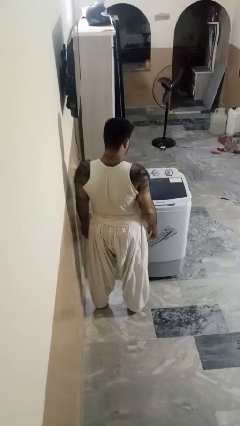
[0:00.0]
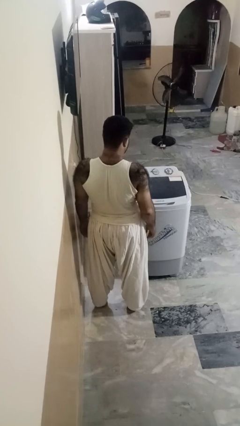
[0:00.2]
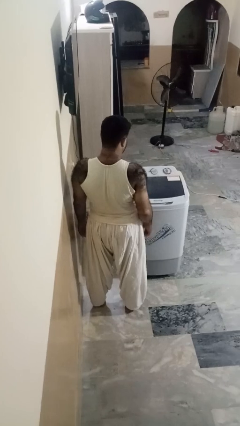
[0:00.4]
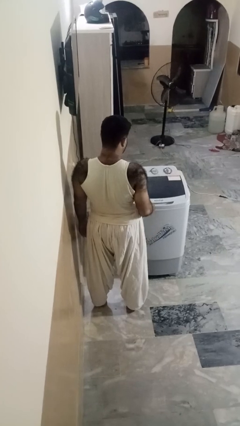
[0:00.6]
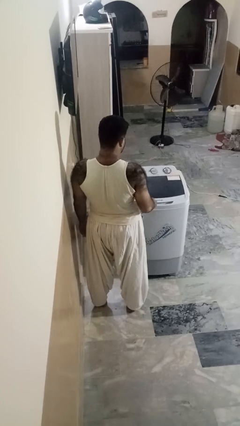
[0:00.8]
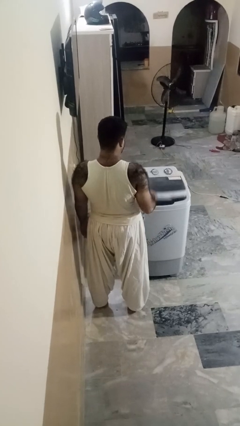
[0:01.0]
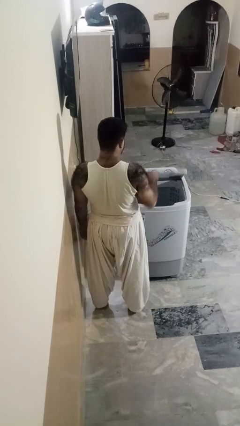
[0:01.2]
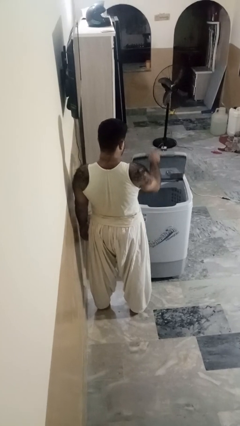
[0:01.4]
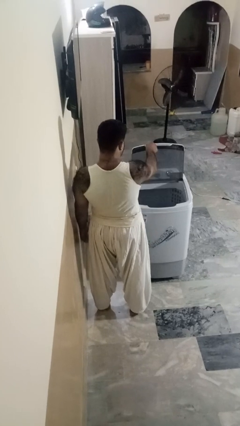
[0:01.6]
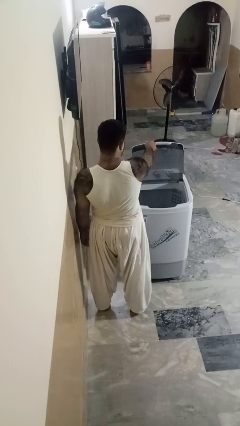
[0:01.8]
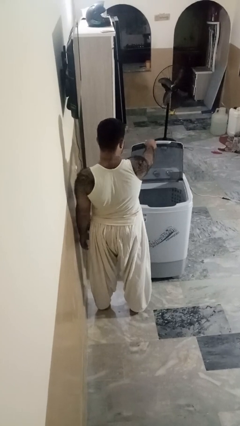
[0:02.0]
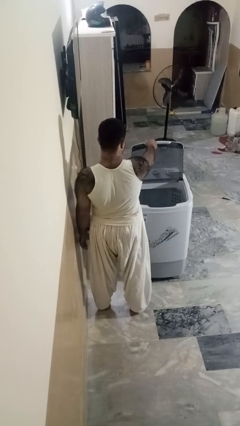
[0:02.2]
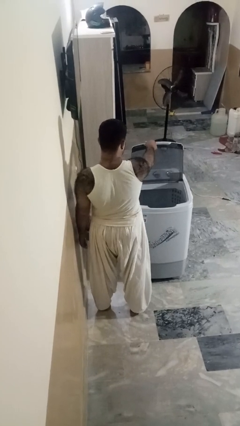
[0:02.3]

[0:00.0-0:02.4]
person opens clothes washer

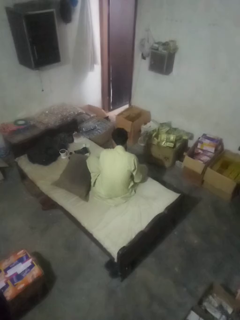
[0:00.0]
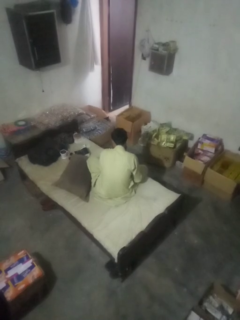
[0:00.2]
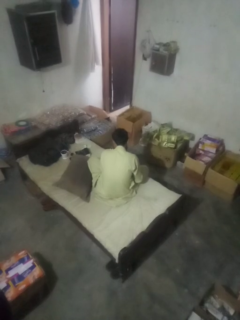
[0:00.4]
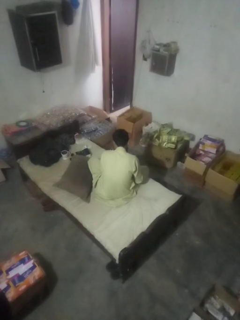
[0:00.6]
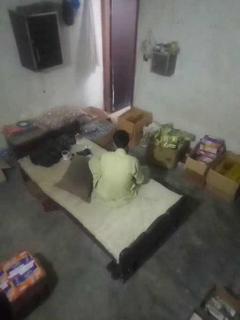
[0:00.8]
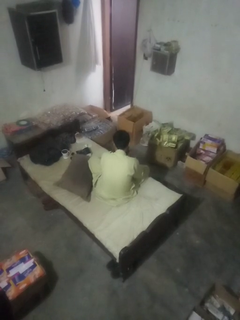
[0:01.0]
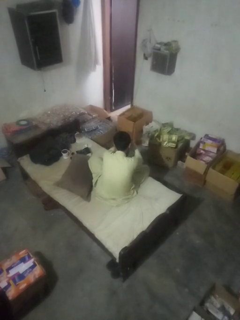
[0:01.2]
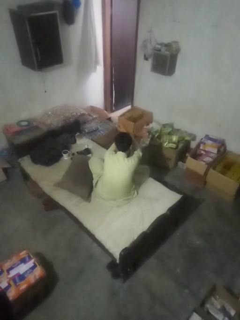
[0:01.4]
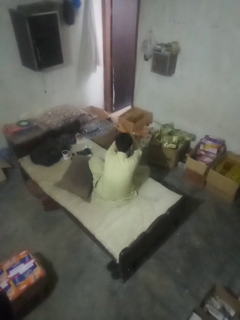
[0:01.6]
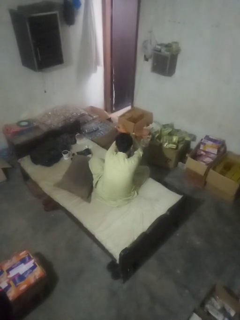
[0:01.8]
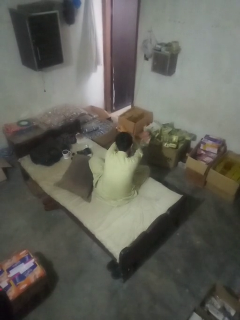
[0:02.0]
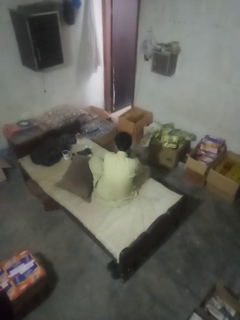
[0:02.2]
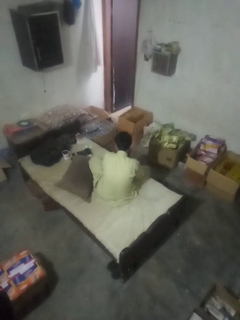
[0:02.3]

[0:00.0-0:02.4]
person gestures arms x

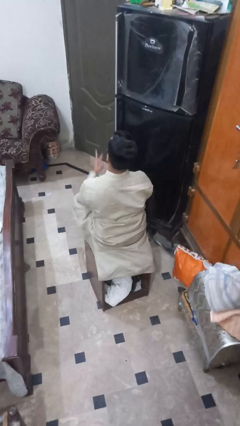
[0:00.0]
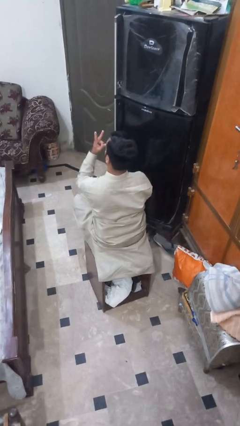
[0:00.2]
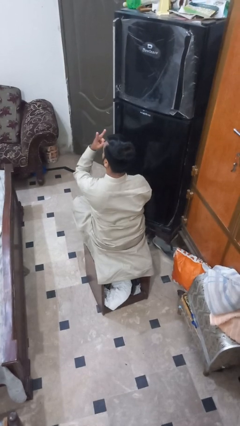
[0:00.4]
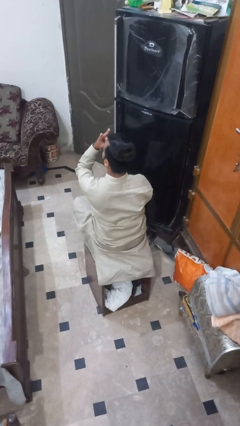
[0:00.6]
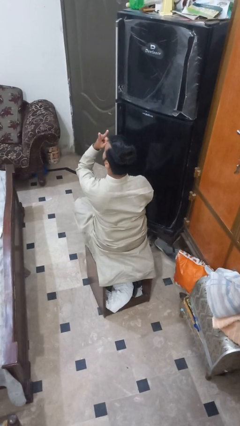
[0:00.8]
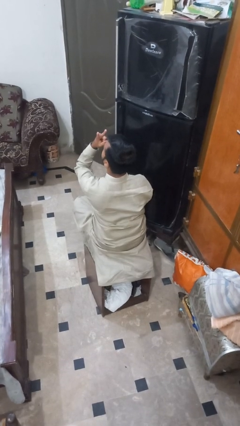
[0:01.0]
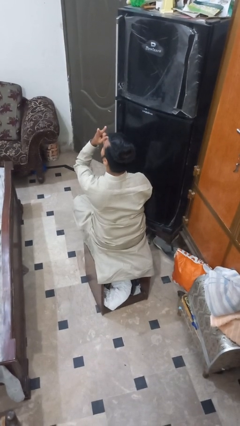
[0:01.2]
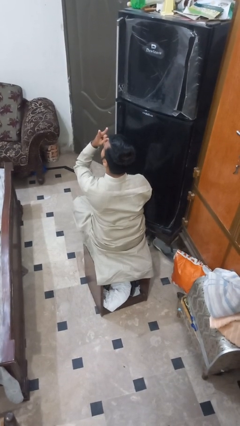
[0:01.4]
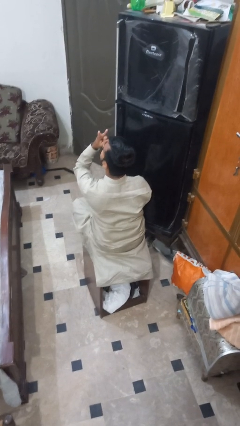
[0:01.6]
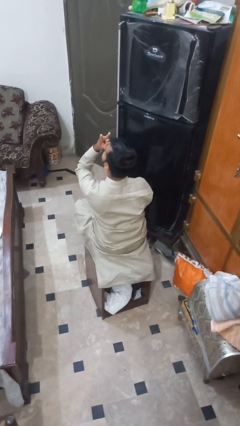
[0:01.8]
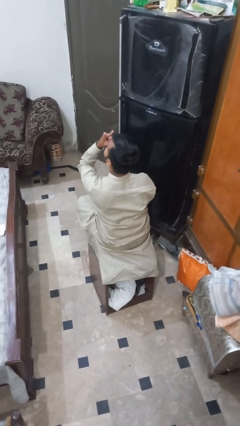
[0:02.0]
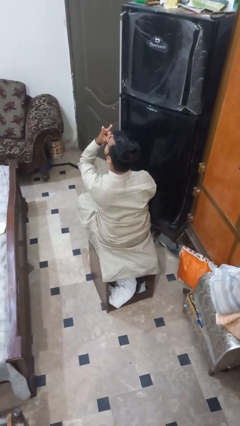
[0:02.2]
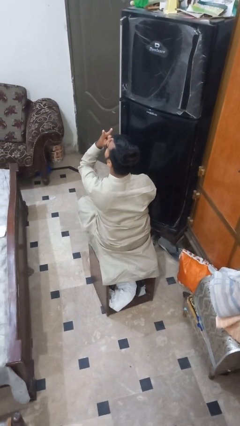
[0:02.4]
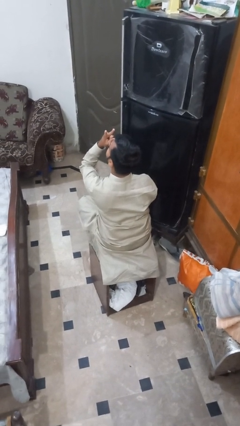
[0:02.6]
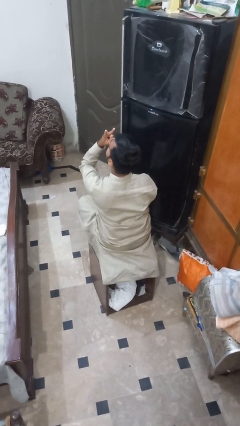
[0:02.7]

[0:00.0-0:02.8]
person gestures watch closely

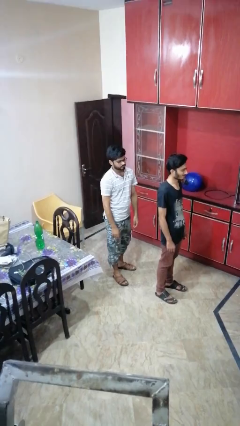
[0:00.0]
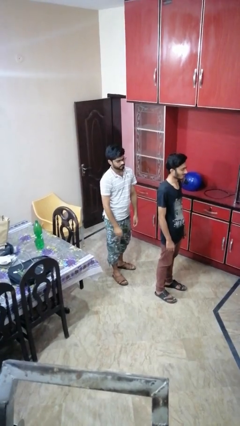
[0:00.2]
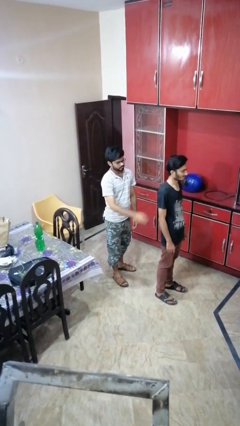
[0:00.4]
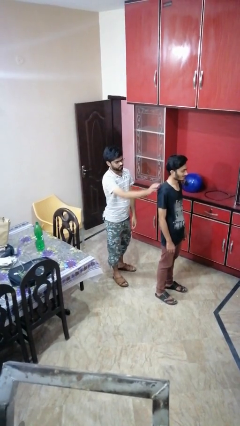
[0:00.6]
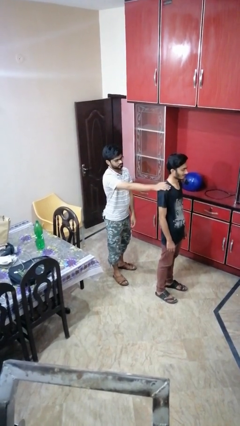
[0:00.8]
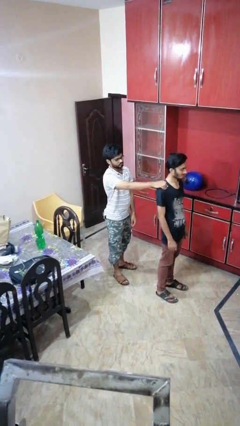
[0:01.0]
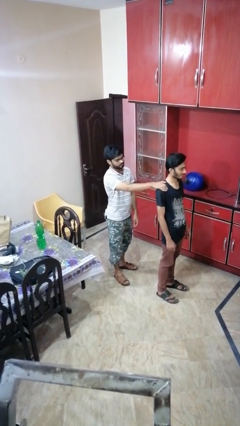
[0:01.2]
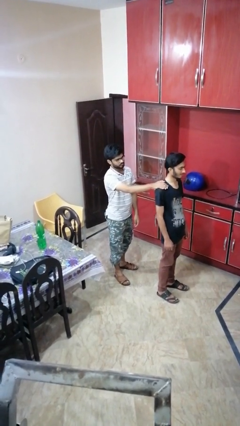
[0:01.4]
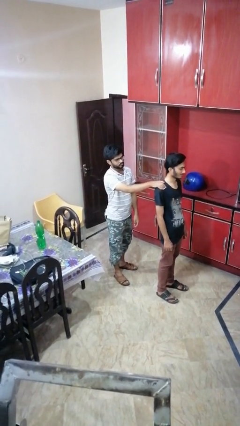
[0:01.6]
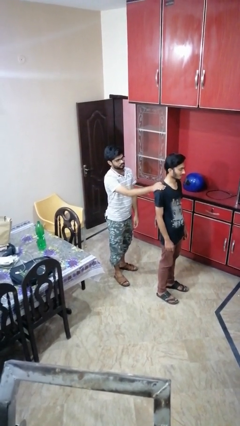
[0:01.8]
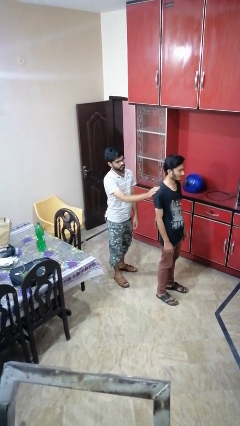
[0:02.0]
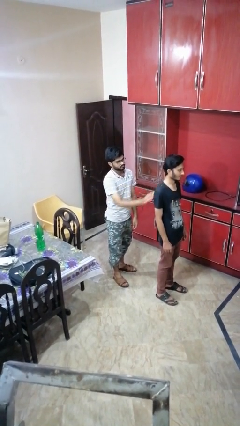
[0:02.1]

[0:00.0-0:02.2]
person touches back of person

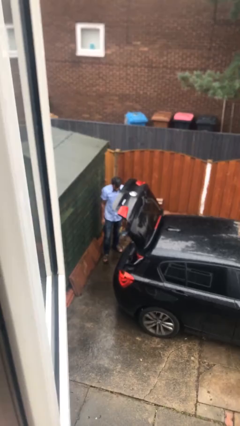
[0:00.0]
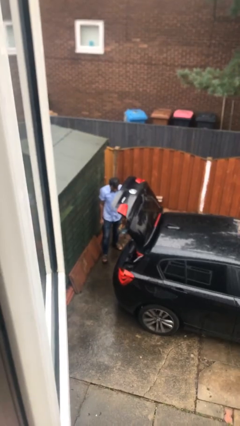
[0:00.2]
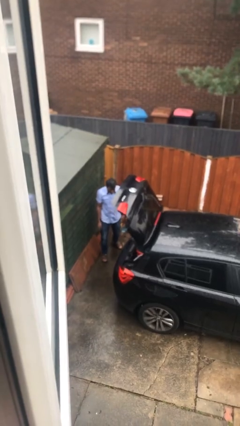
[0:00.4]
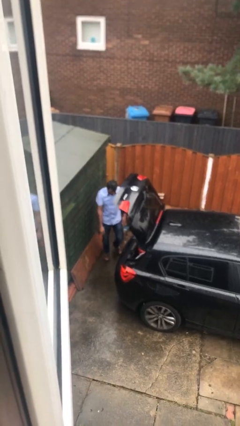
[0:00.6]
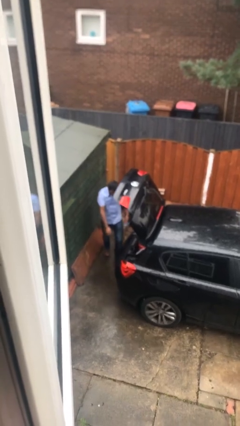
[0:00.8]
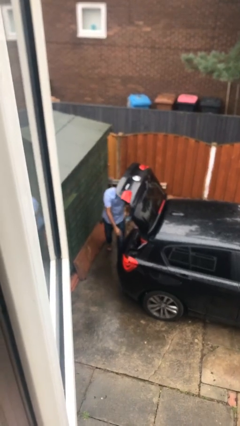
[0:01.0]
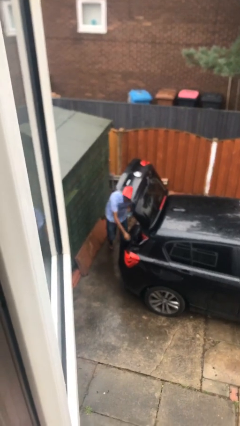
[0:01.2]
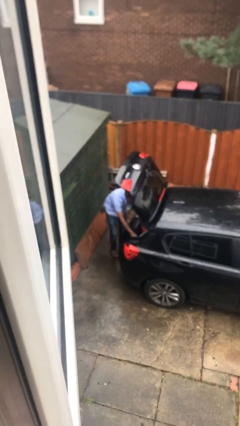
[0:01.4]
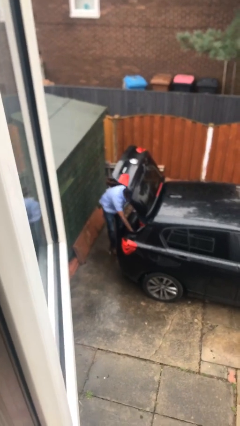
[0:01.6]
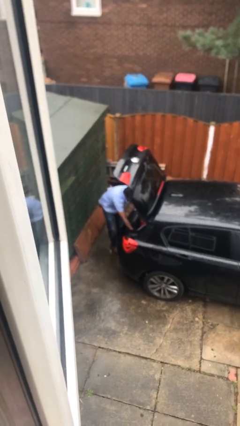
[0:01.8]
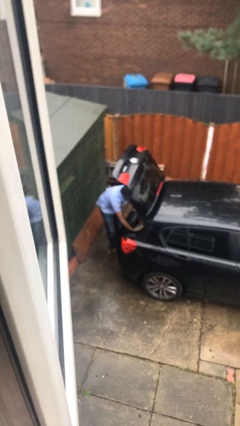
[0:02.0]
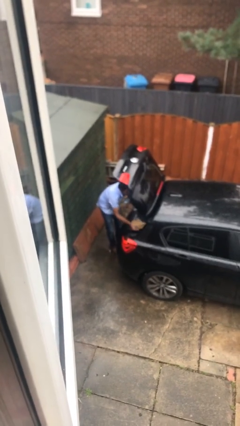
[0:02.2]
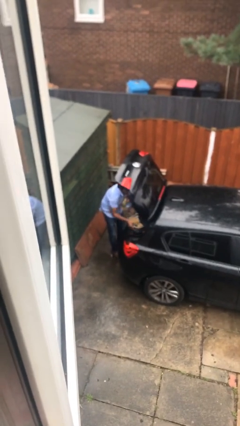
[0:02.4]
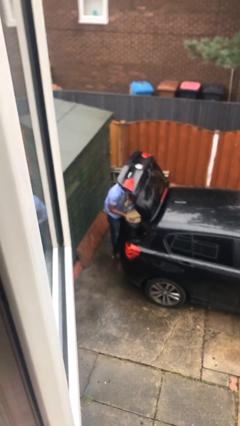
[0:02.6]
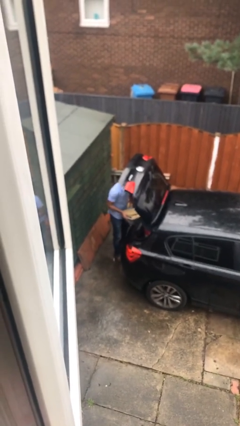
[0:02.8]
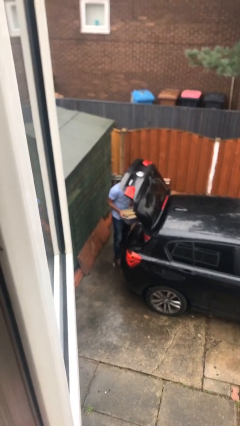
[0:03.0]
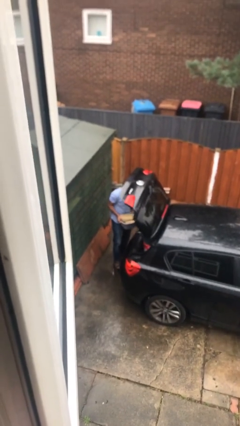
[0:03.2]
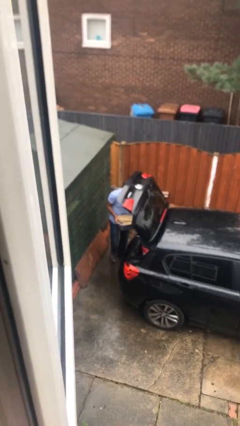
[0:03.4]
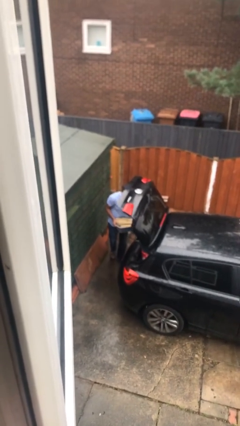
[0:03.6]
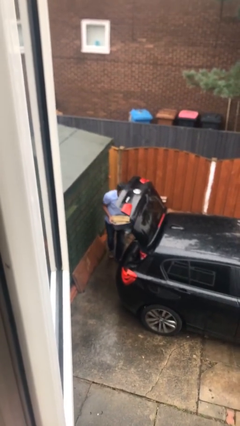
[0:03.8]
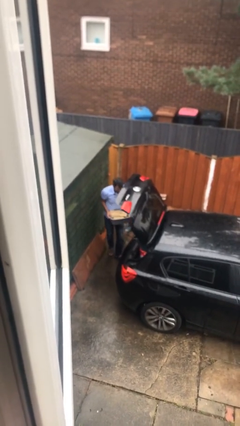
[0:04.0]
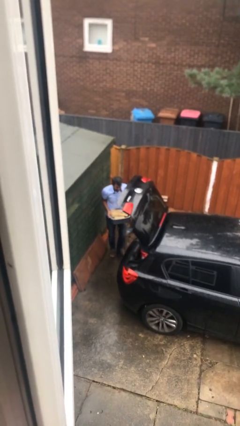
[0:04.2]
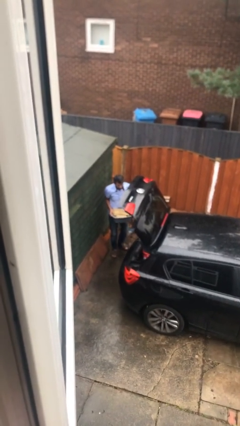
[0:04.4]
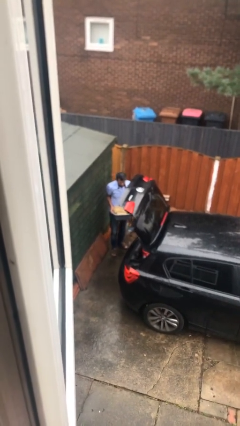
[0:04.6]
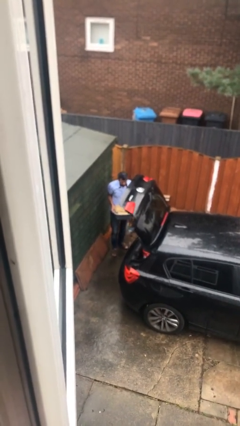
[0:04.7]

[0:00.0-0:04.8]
person unloads car

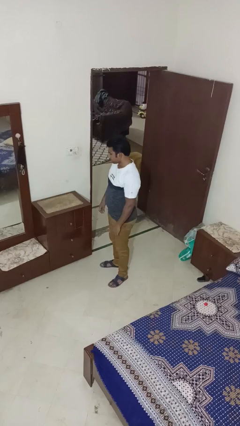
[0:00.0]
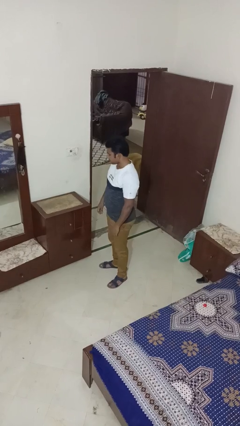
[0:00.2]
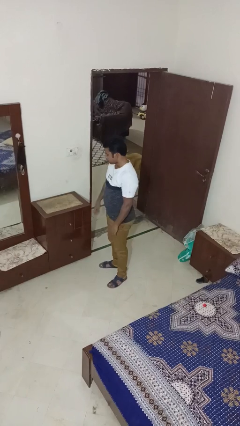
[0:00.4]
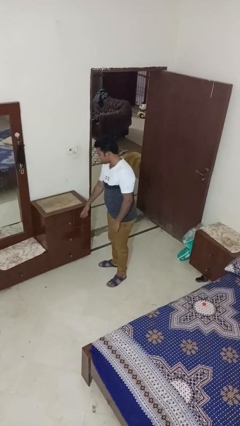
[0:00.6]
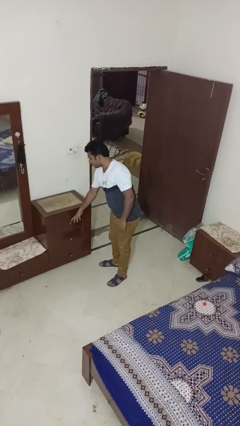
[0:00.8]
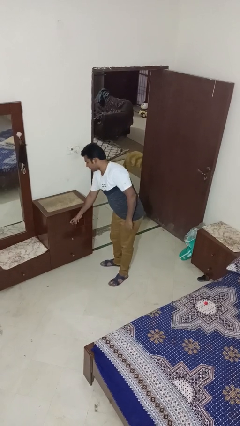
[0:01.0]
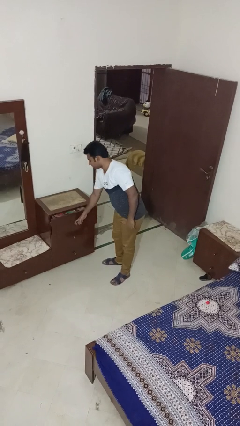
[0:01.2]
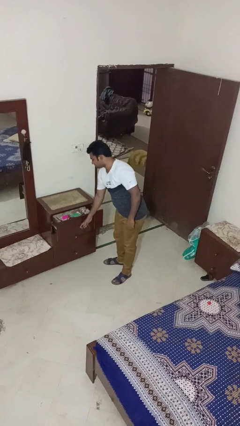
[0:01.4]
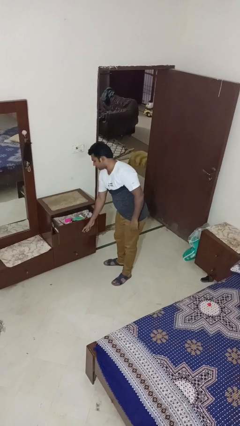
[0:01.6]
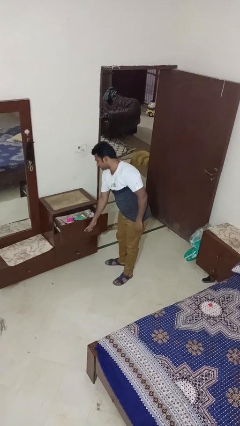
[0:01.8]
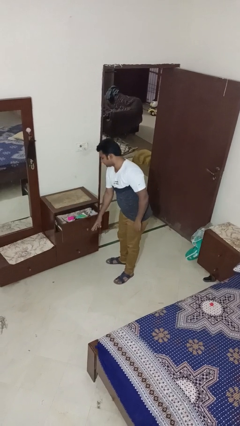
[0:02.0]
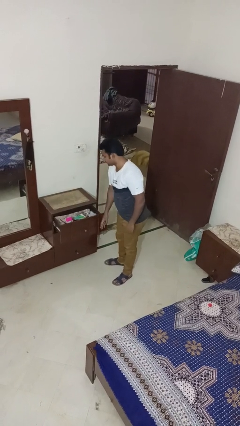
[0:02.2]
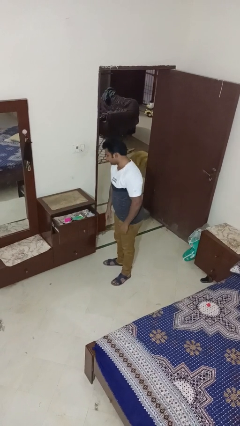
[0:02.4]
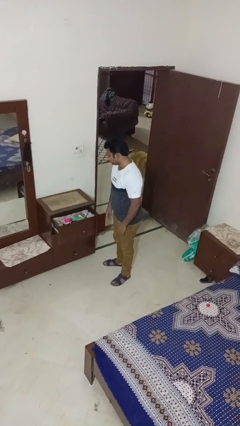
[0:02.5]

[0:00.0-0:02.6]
person opens dresser drawer

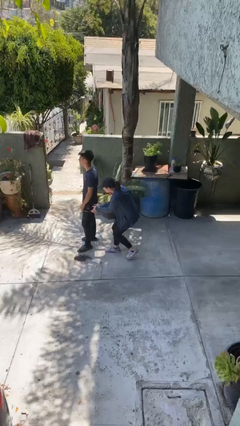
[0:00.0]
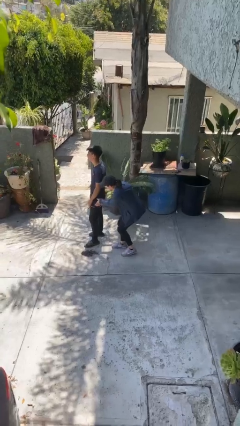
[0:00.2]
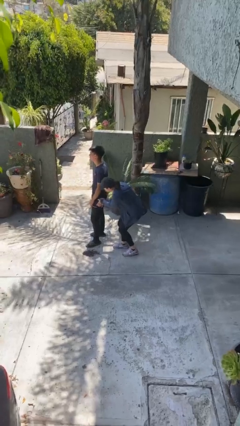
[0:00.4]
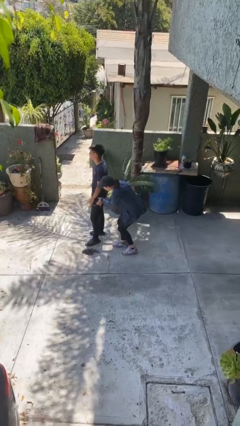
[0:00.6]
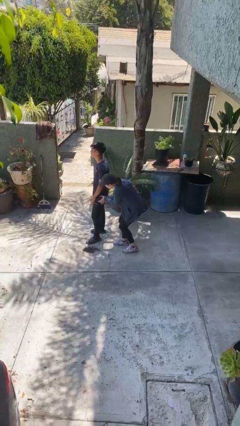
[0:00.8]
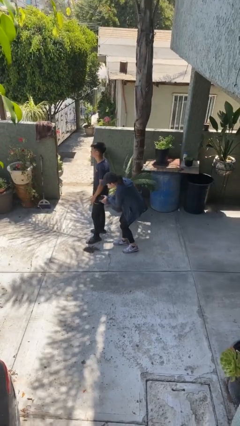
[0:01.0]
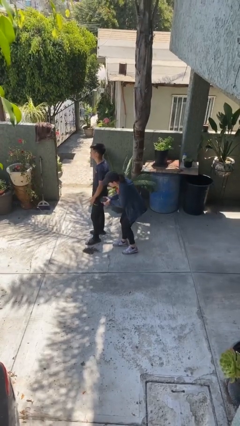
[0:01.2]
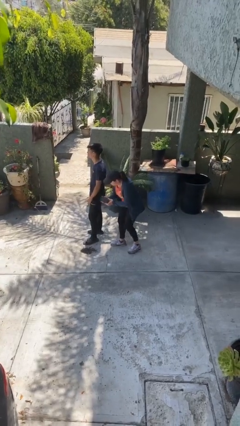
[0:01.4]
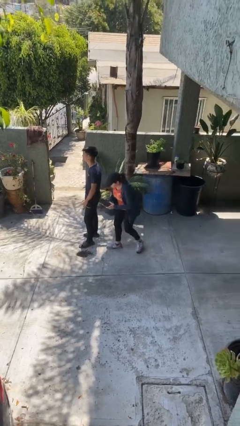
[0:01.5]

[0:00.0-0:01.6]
person steals object from person
